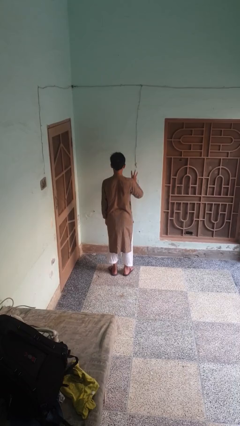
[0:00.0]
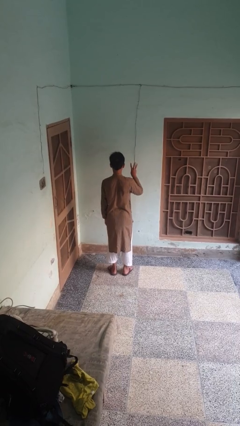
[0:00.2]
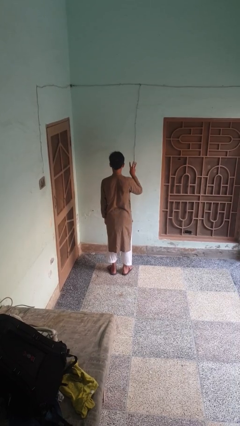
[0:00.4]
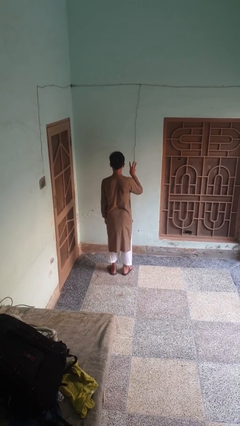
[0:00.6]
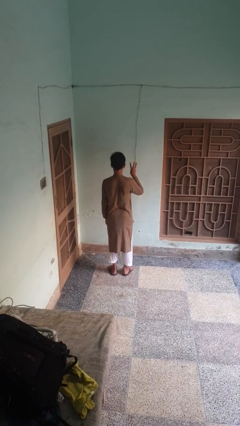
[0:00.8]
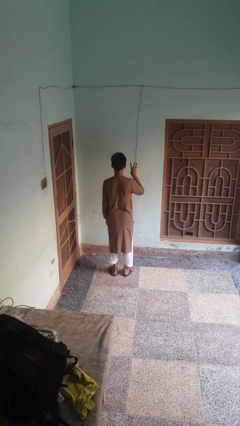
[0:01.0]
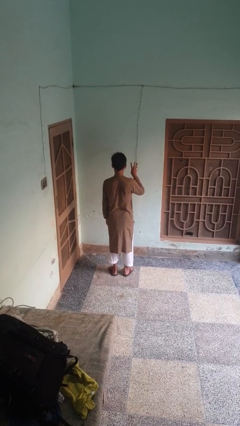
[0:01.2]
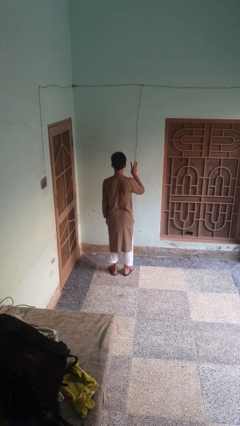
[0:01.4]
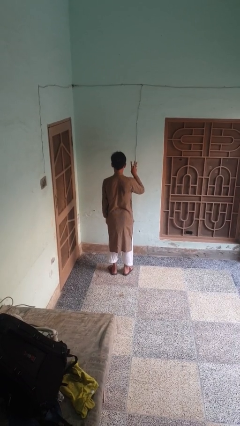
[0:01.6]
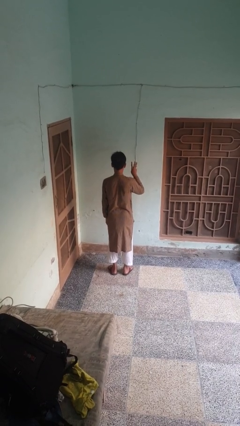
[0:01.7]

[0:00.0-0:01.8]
person gestures number three

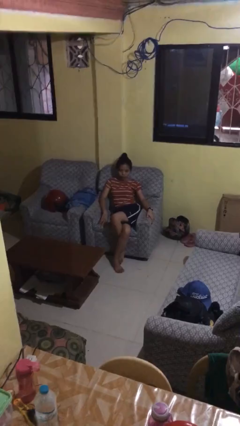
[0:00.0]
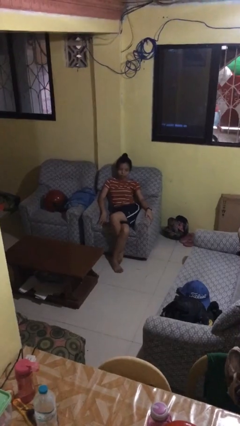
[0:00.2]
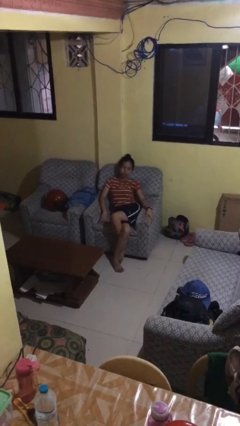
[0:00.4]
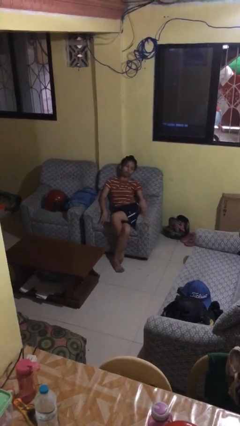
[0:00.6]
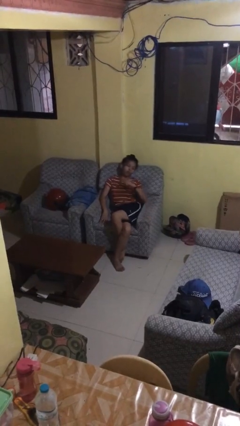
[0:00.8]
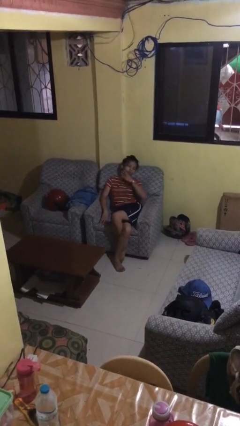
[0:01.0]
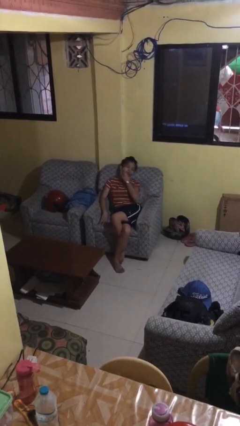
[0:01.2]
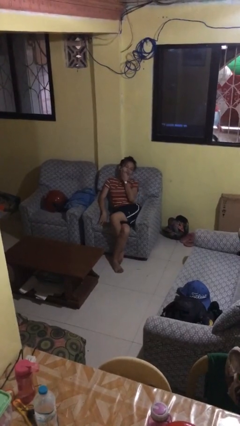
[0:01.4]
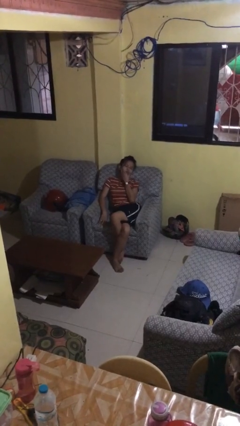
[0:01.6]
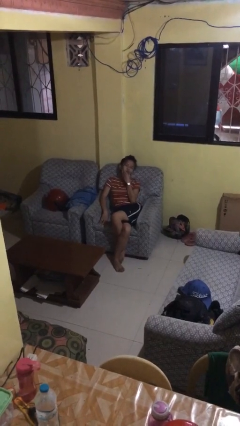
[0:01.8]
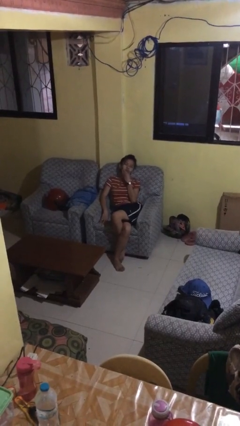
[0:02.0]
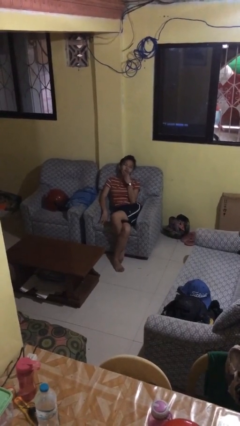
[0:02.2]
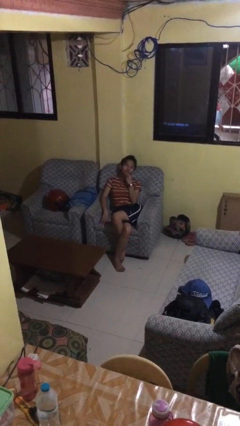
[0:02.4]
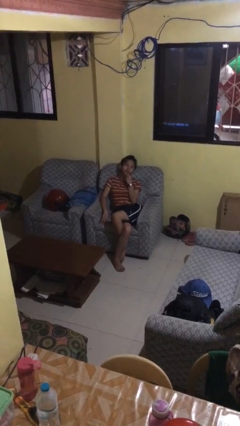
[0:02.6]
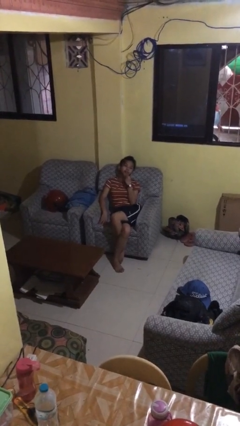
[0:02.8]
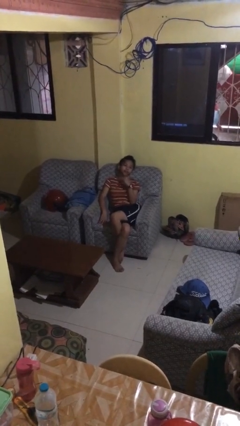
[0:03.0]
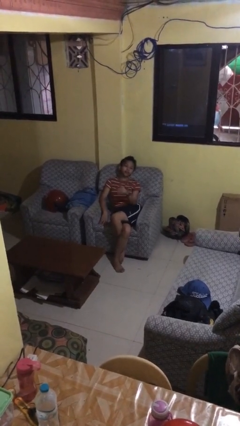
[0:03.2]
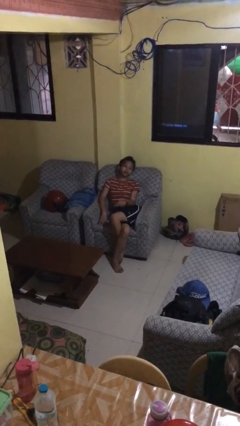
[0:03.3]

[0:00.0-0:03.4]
person strokes chin

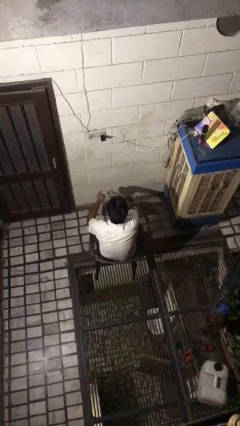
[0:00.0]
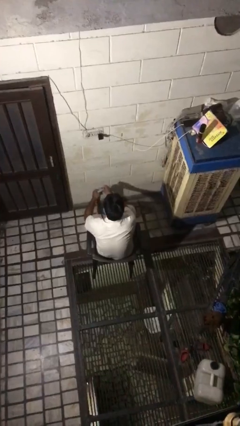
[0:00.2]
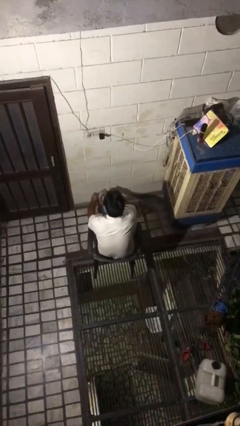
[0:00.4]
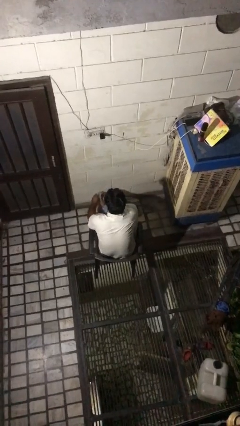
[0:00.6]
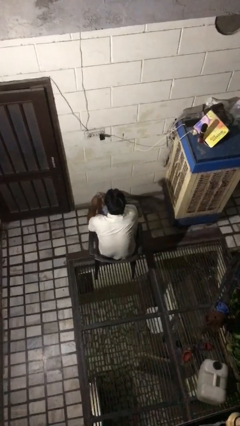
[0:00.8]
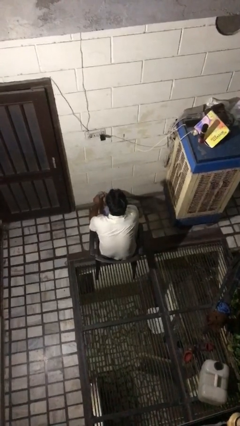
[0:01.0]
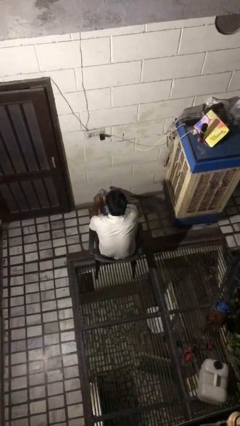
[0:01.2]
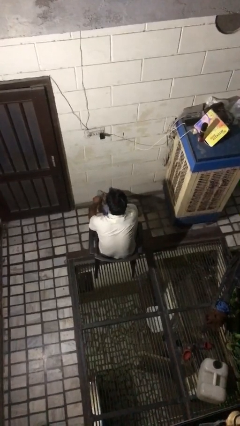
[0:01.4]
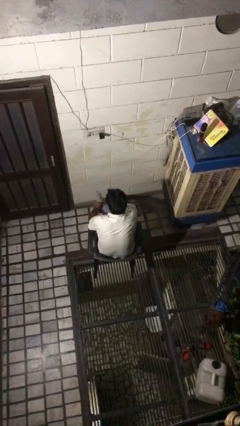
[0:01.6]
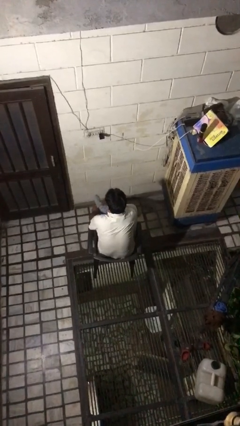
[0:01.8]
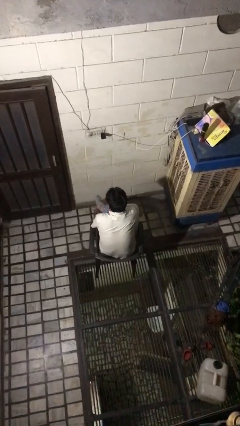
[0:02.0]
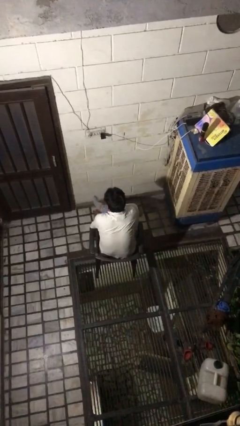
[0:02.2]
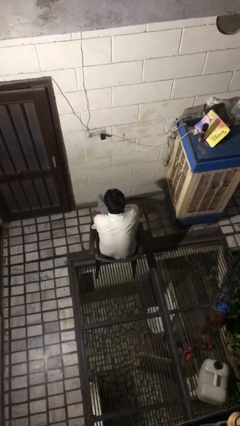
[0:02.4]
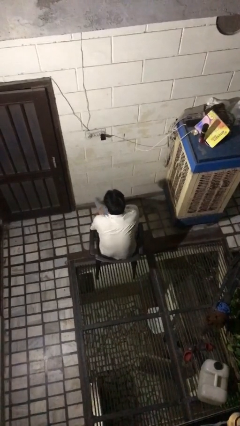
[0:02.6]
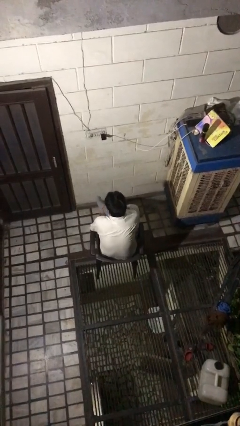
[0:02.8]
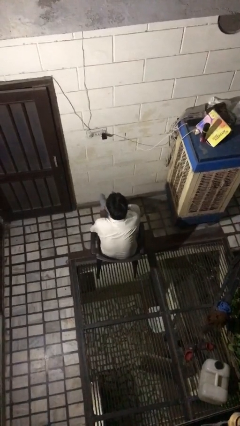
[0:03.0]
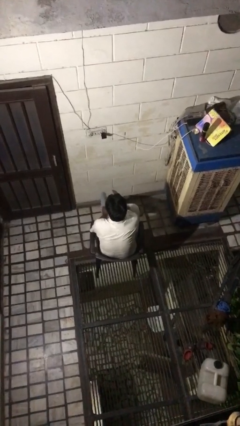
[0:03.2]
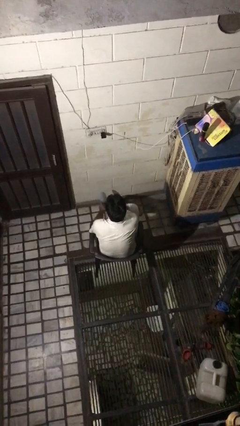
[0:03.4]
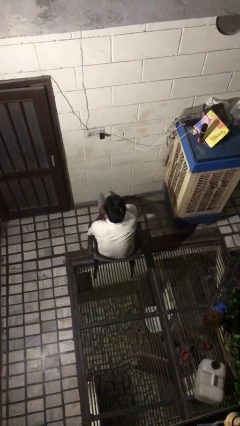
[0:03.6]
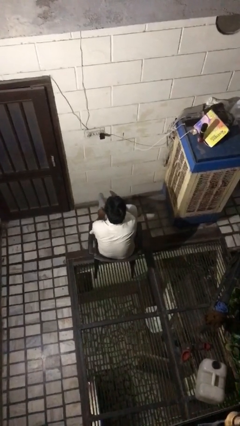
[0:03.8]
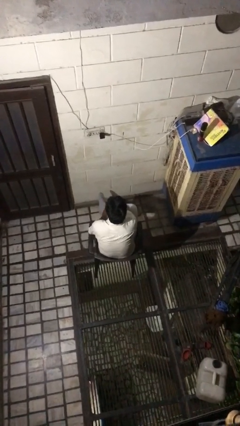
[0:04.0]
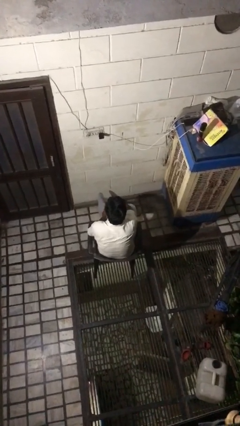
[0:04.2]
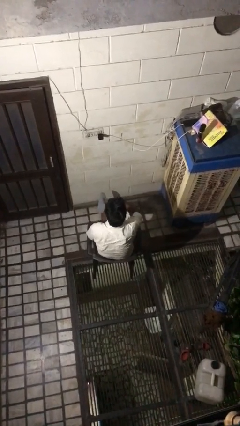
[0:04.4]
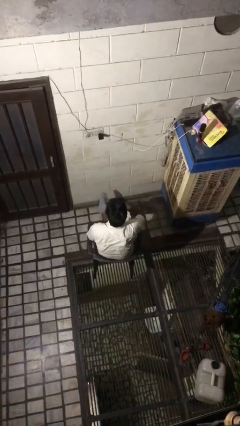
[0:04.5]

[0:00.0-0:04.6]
person puts on socks

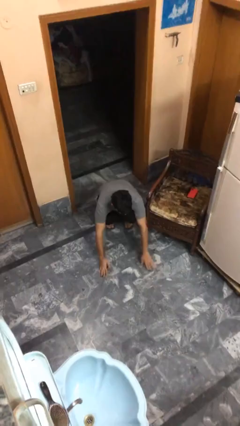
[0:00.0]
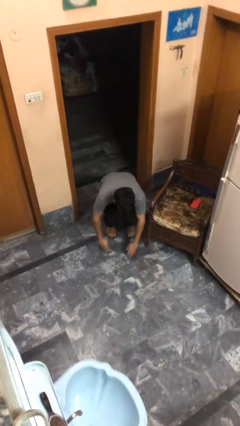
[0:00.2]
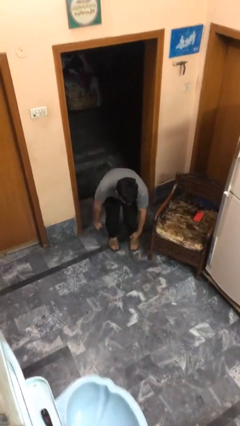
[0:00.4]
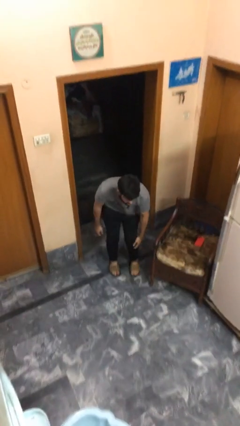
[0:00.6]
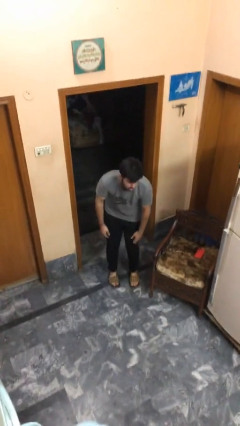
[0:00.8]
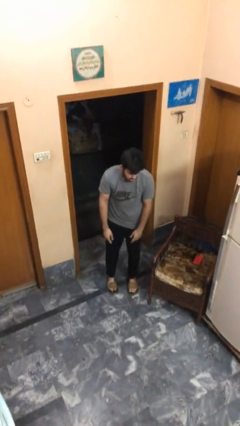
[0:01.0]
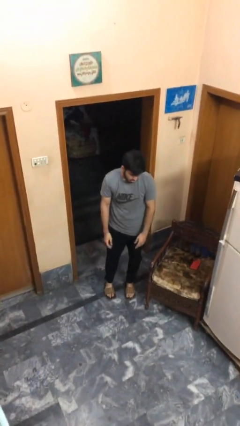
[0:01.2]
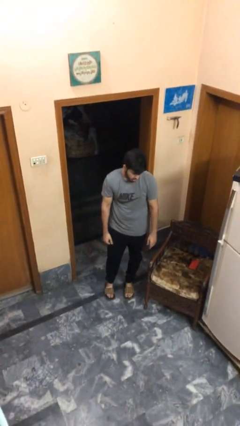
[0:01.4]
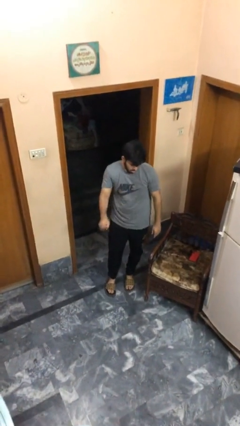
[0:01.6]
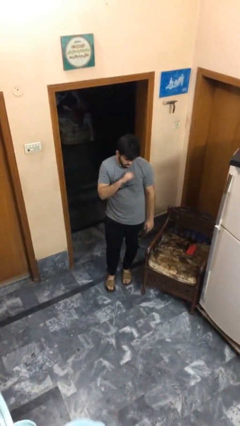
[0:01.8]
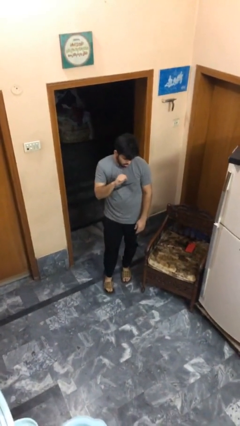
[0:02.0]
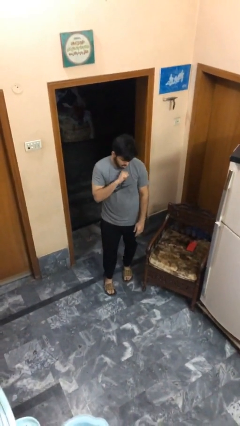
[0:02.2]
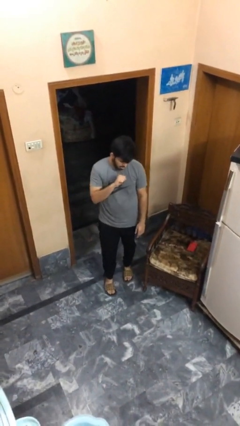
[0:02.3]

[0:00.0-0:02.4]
person stands up from floor

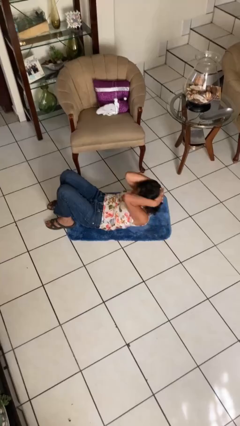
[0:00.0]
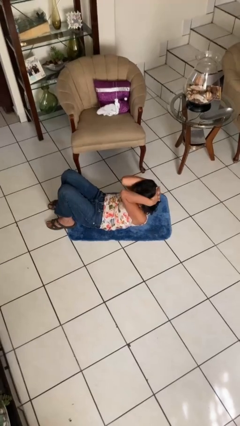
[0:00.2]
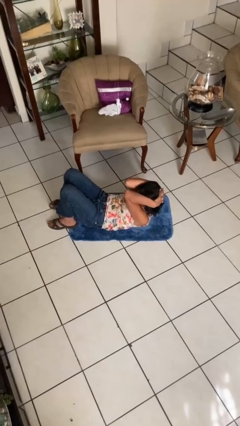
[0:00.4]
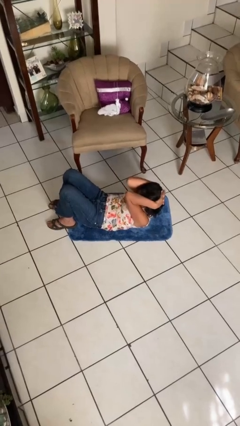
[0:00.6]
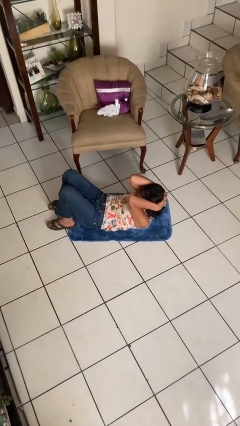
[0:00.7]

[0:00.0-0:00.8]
person exercises with situp

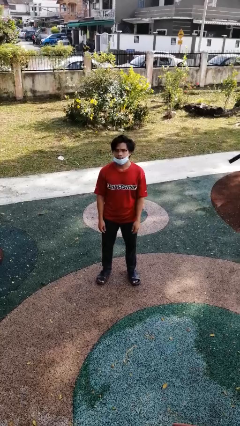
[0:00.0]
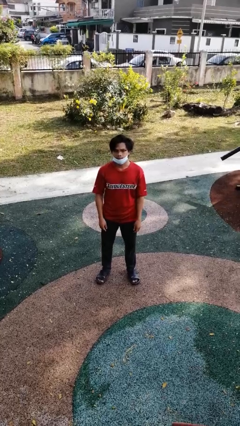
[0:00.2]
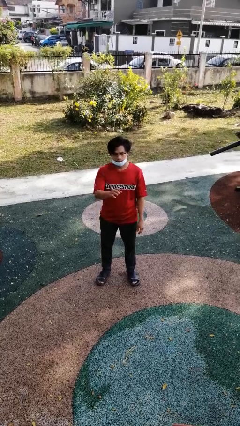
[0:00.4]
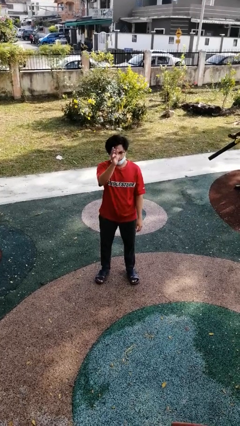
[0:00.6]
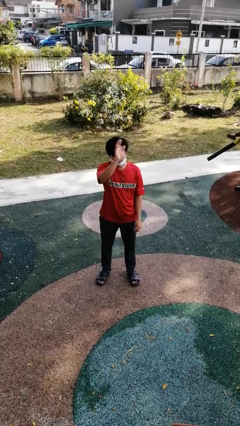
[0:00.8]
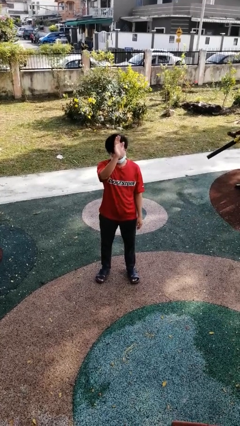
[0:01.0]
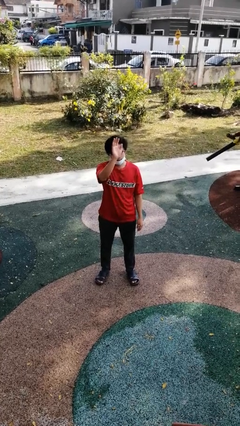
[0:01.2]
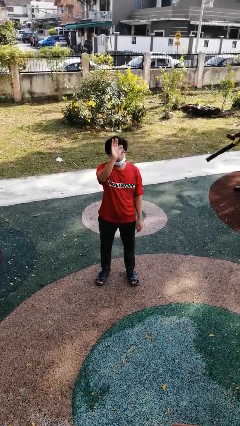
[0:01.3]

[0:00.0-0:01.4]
person waves at person

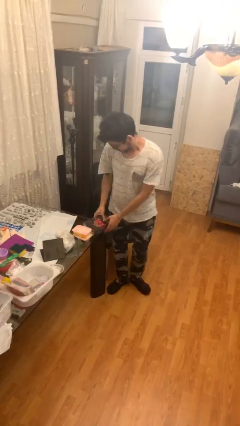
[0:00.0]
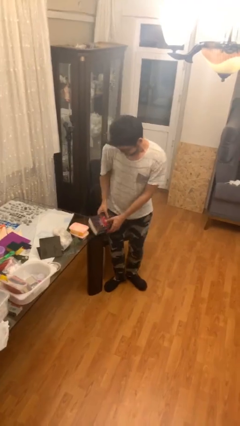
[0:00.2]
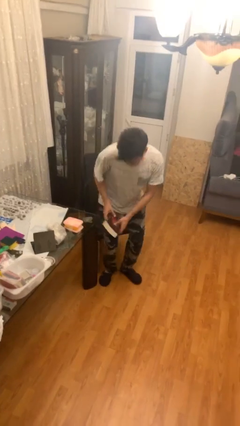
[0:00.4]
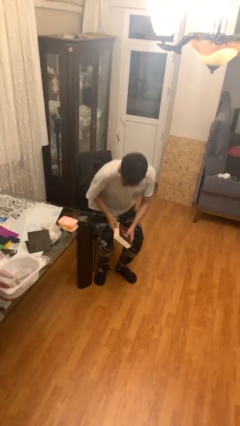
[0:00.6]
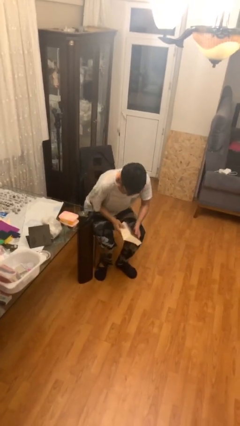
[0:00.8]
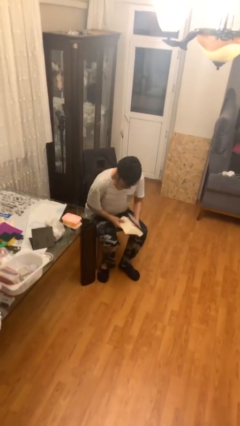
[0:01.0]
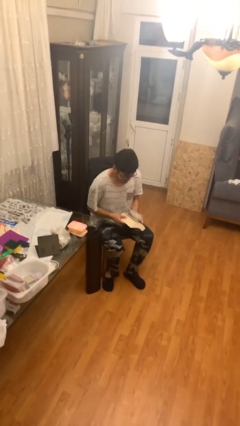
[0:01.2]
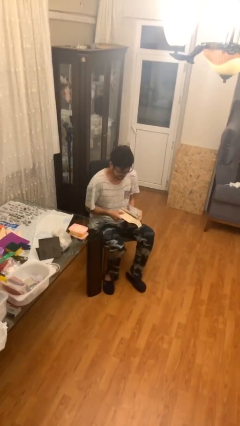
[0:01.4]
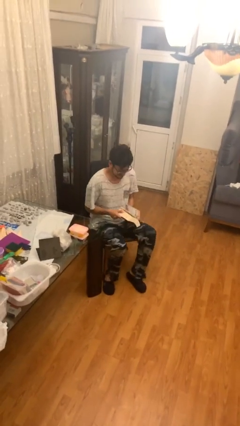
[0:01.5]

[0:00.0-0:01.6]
person sits down

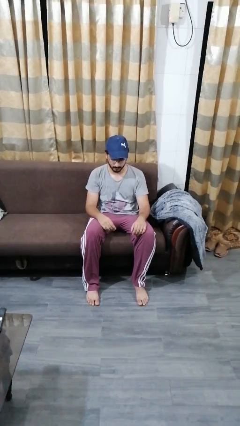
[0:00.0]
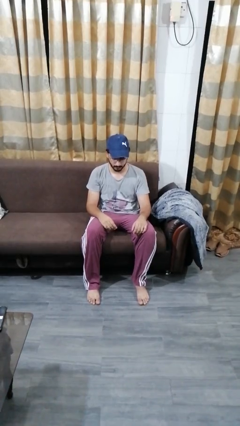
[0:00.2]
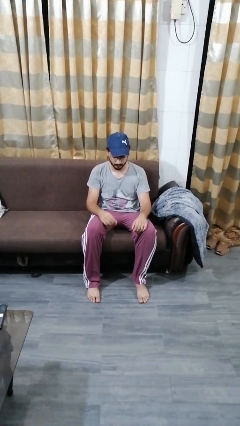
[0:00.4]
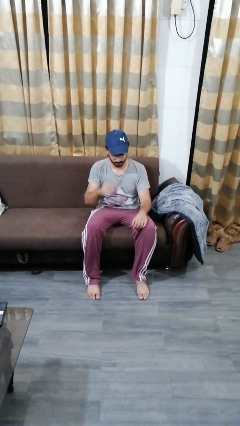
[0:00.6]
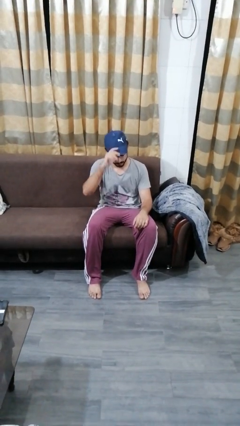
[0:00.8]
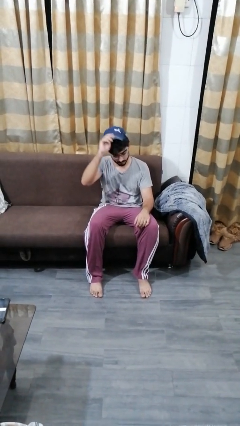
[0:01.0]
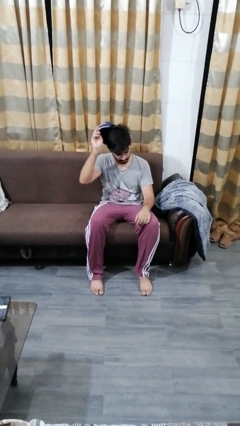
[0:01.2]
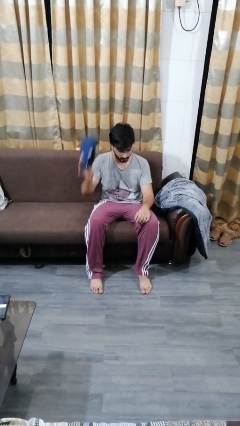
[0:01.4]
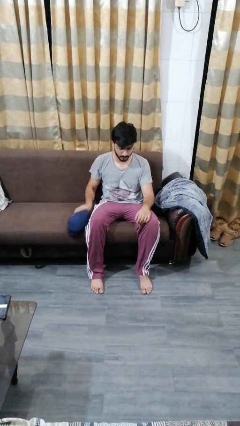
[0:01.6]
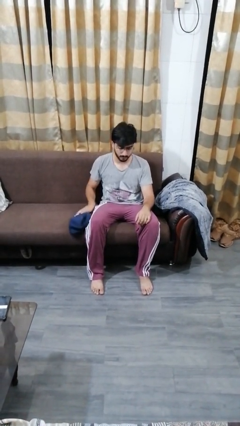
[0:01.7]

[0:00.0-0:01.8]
person takes off hat
